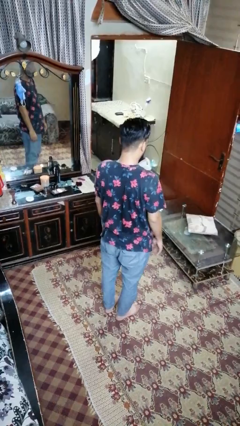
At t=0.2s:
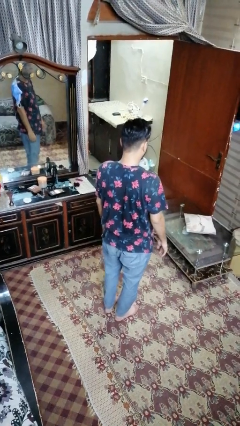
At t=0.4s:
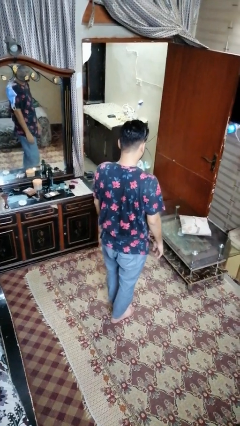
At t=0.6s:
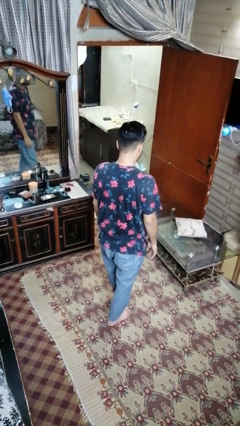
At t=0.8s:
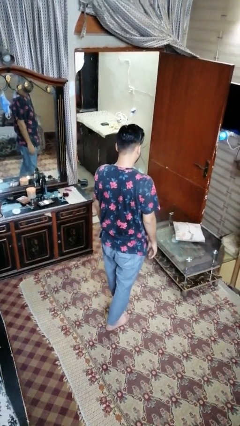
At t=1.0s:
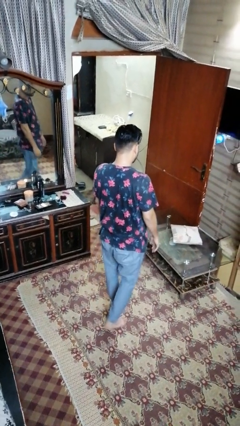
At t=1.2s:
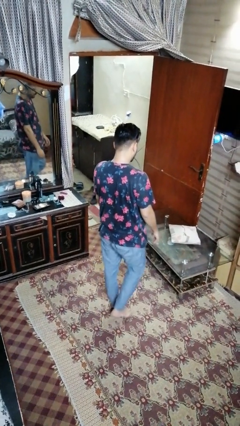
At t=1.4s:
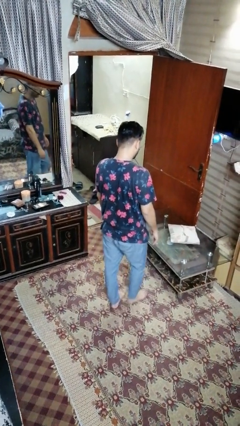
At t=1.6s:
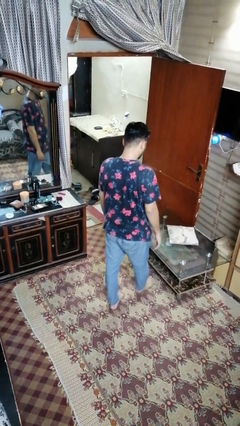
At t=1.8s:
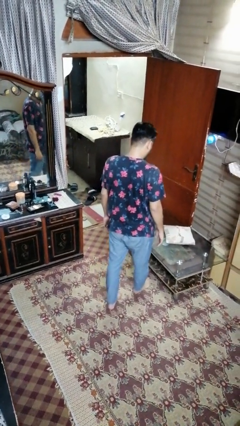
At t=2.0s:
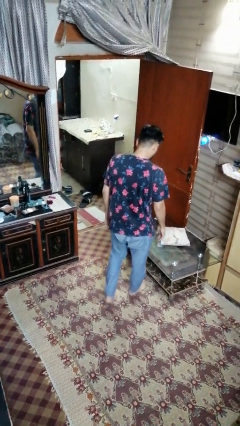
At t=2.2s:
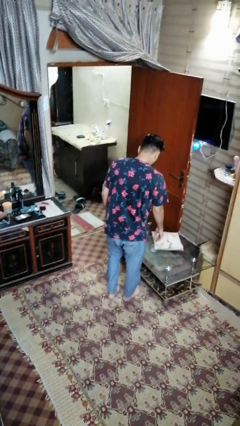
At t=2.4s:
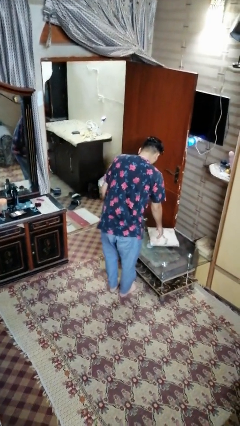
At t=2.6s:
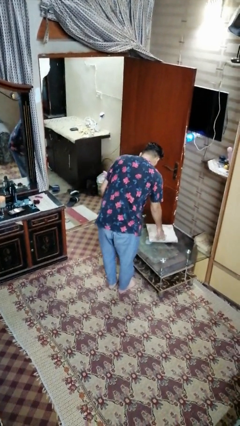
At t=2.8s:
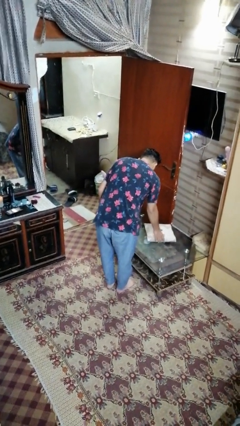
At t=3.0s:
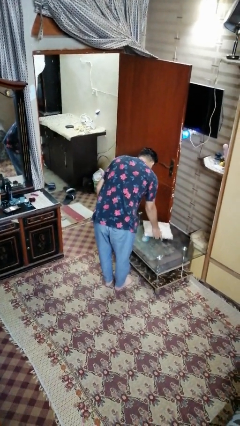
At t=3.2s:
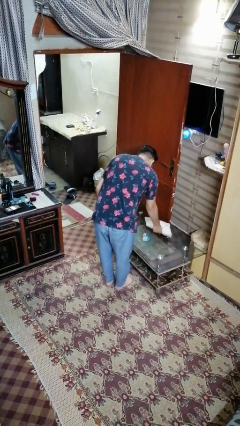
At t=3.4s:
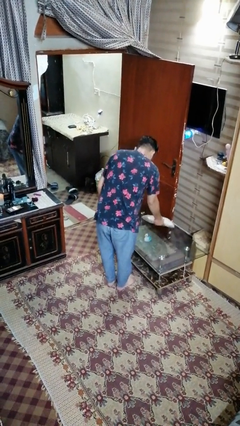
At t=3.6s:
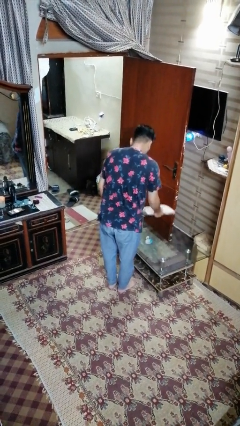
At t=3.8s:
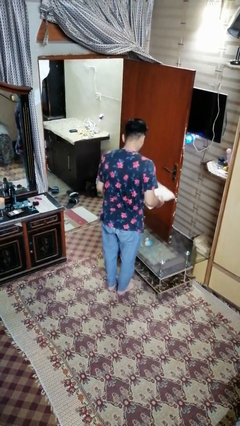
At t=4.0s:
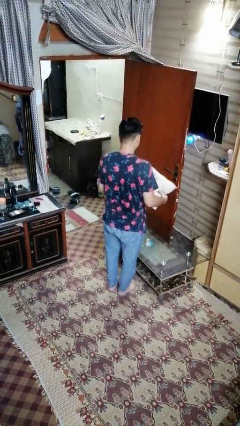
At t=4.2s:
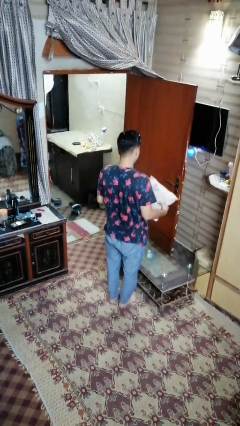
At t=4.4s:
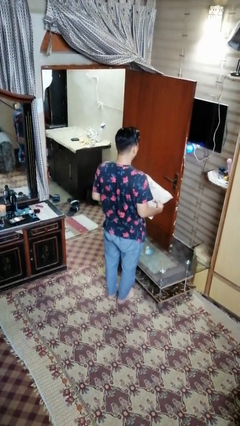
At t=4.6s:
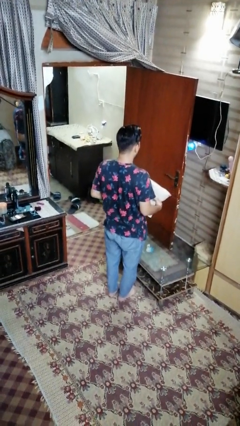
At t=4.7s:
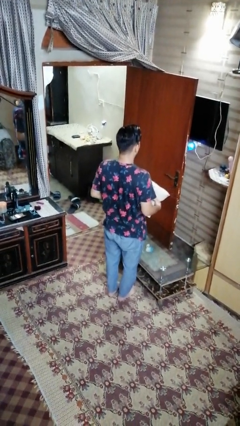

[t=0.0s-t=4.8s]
person picks up object from table

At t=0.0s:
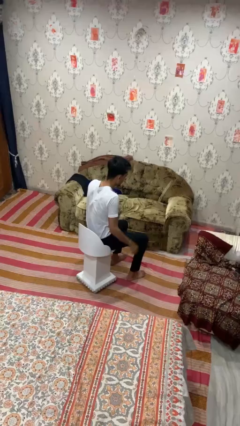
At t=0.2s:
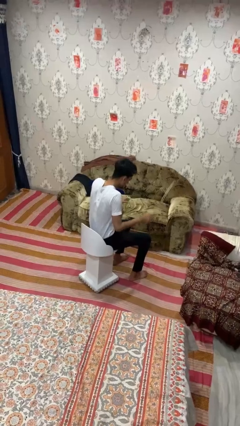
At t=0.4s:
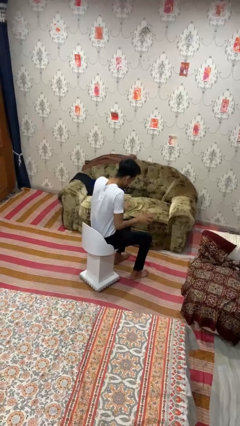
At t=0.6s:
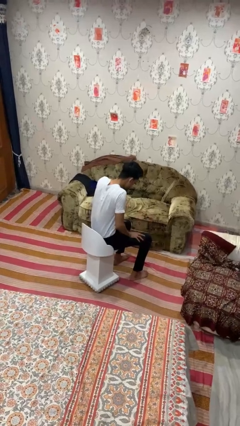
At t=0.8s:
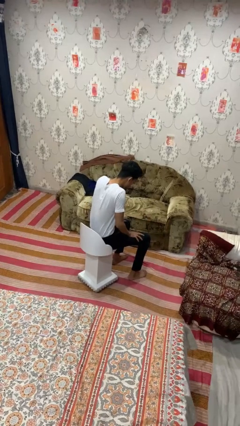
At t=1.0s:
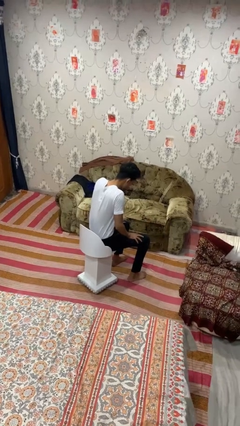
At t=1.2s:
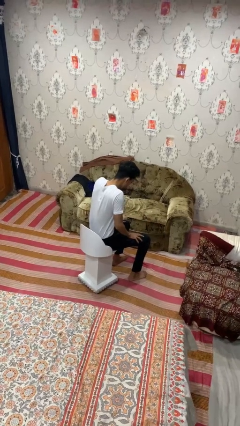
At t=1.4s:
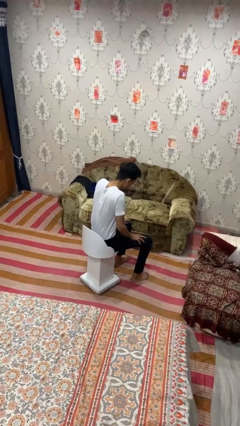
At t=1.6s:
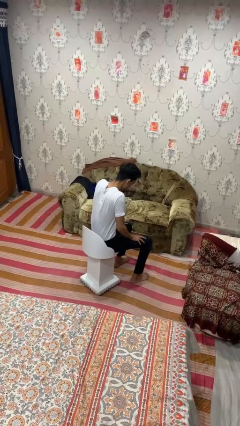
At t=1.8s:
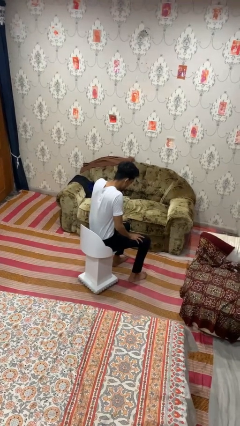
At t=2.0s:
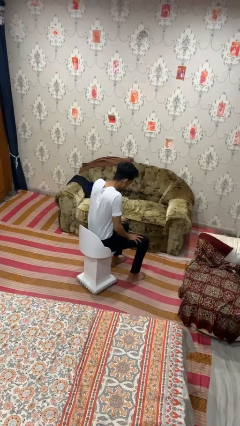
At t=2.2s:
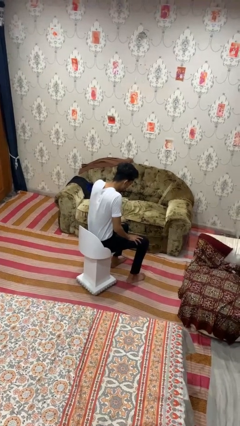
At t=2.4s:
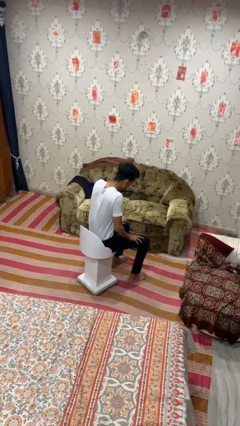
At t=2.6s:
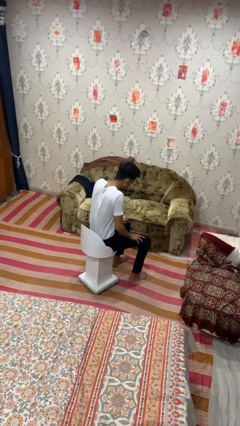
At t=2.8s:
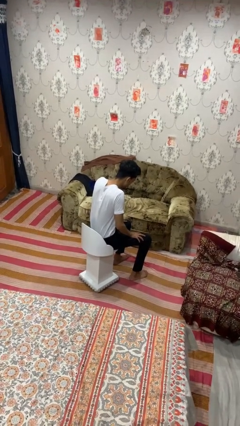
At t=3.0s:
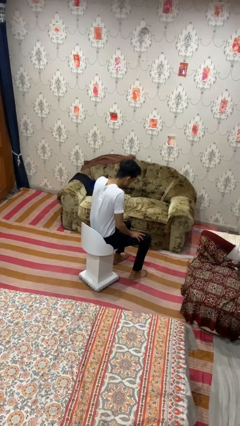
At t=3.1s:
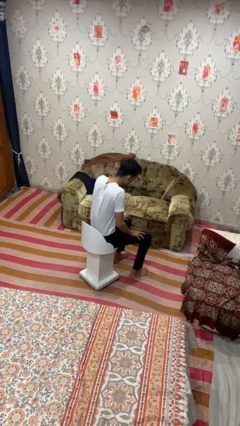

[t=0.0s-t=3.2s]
person slaps hands on thighs

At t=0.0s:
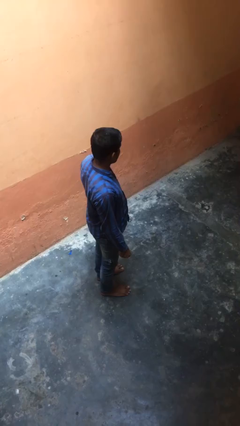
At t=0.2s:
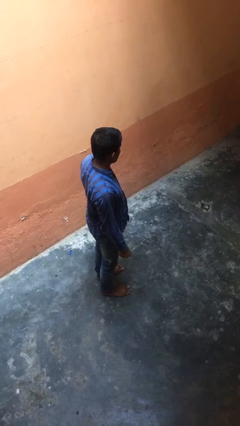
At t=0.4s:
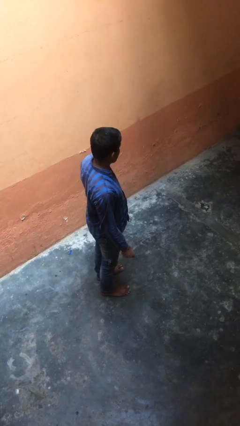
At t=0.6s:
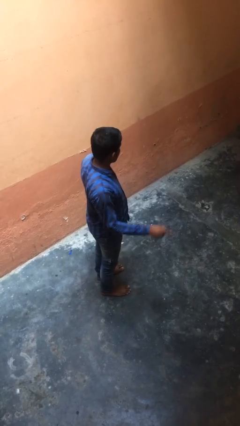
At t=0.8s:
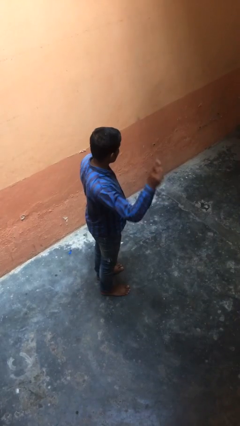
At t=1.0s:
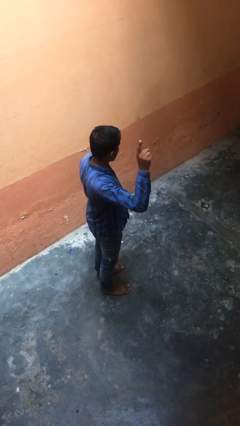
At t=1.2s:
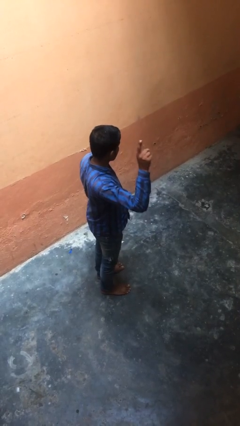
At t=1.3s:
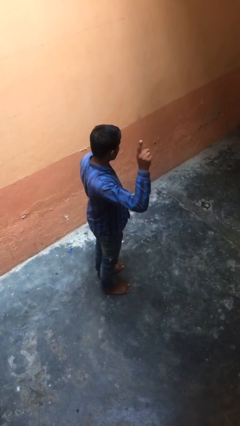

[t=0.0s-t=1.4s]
person gestures number one

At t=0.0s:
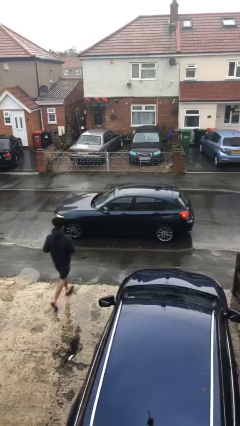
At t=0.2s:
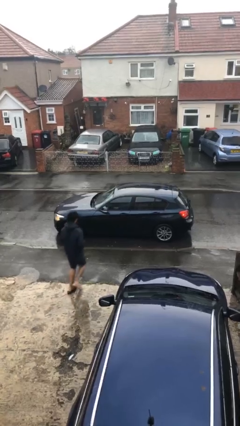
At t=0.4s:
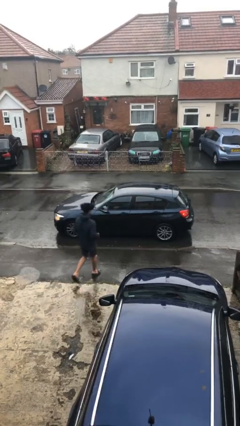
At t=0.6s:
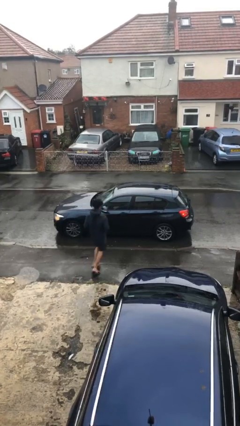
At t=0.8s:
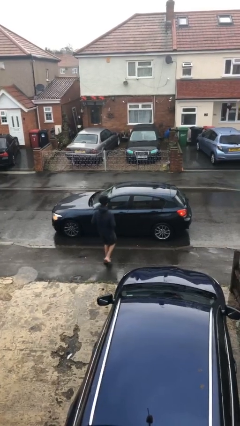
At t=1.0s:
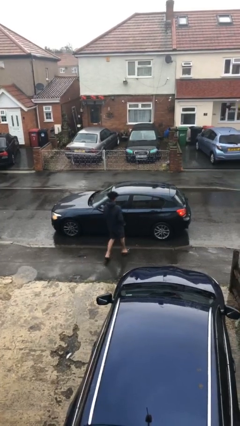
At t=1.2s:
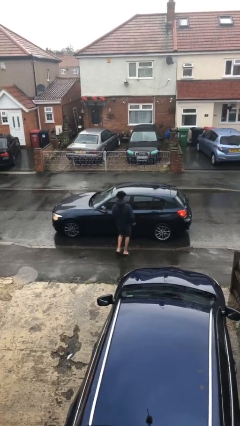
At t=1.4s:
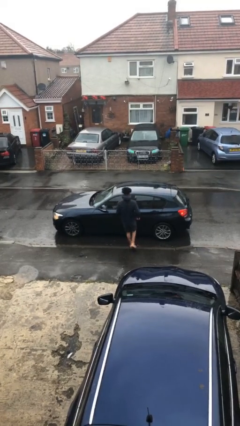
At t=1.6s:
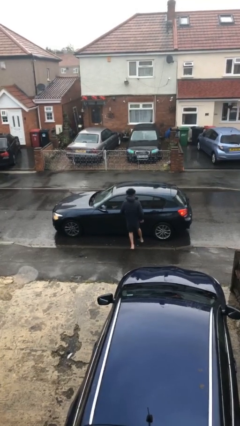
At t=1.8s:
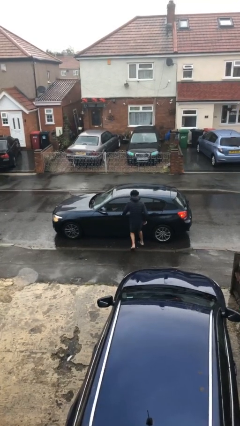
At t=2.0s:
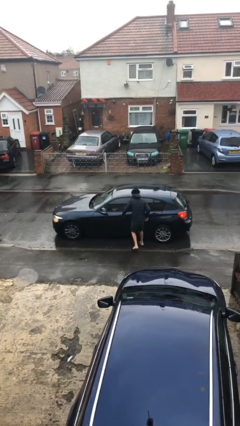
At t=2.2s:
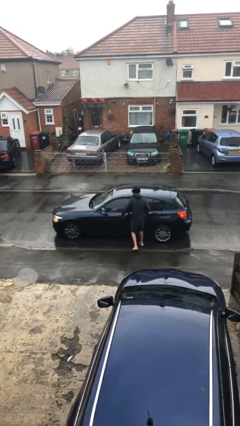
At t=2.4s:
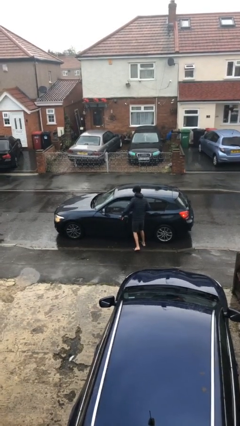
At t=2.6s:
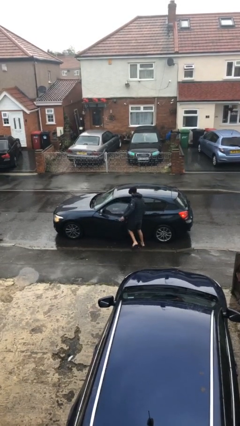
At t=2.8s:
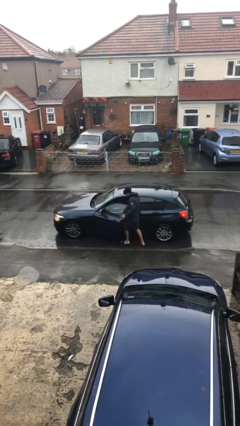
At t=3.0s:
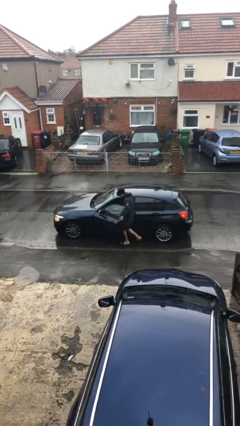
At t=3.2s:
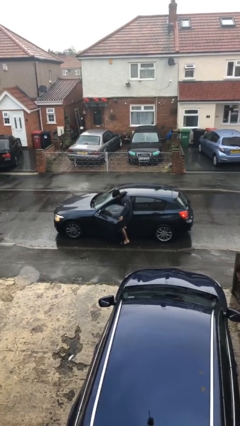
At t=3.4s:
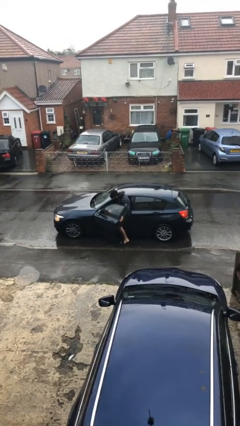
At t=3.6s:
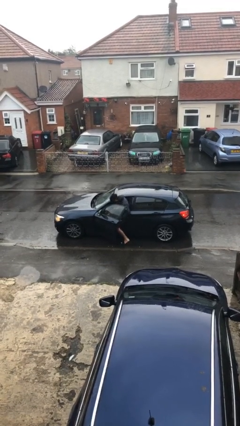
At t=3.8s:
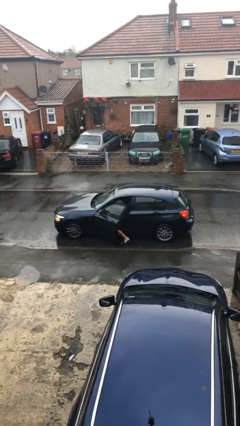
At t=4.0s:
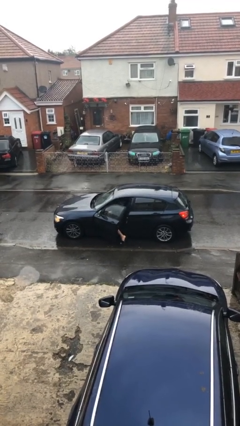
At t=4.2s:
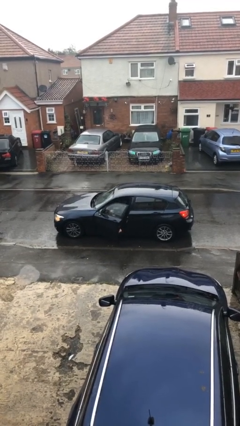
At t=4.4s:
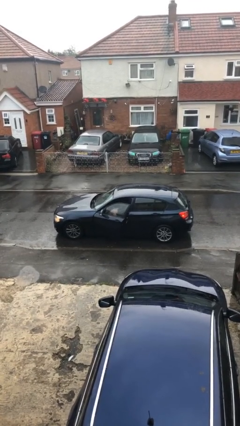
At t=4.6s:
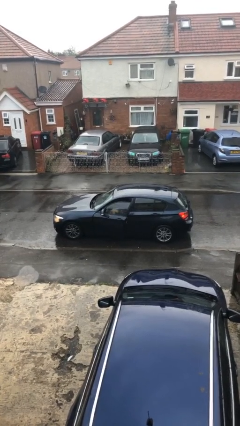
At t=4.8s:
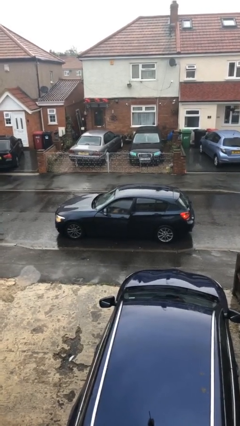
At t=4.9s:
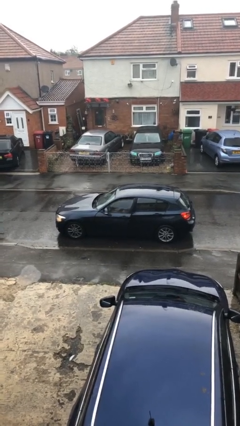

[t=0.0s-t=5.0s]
car picks up person

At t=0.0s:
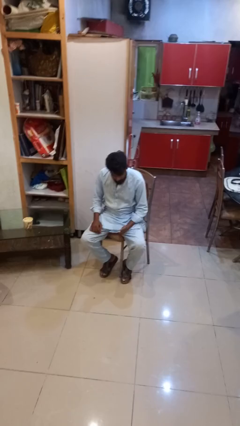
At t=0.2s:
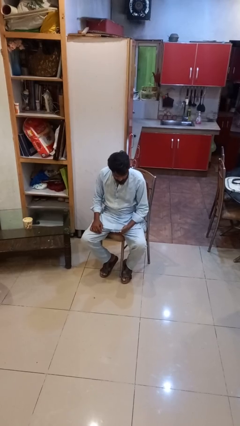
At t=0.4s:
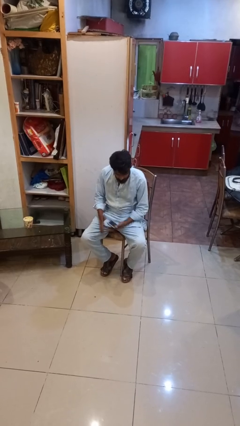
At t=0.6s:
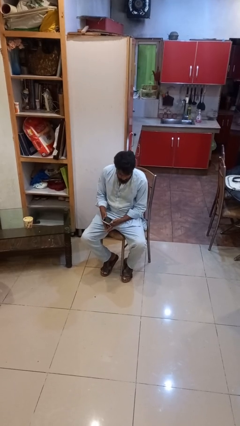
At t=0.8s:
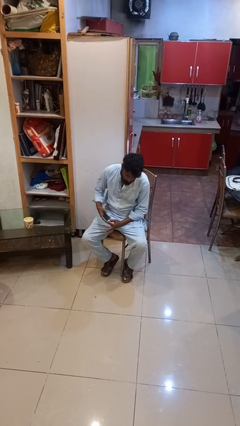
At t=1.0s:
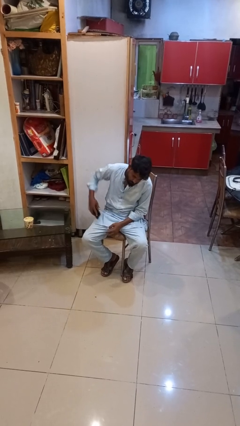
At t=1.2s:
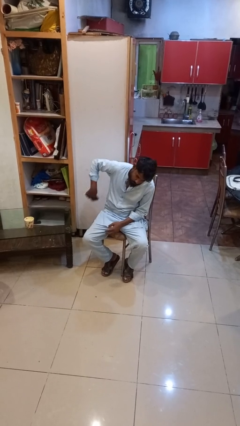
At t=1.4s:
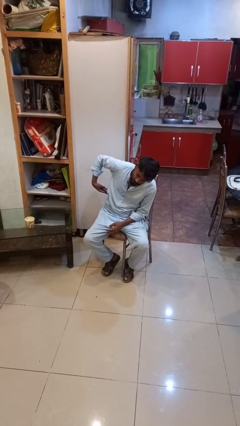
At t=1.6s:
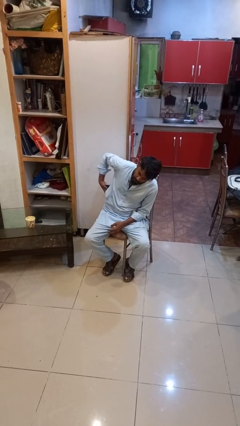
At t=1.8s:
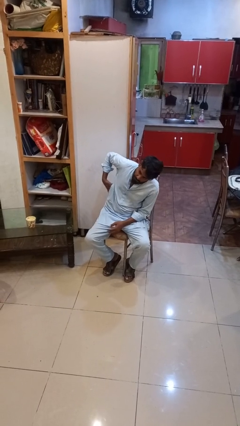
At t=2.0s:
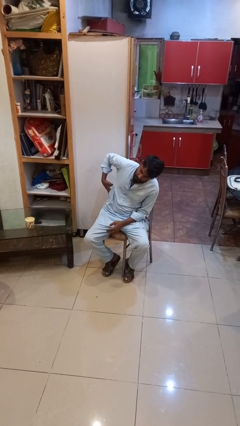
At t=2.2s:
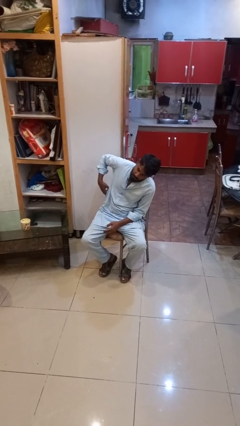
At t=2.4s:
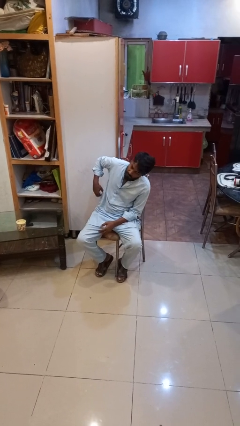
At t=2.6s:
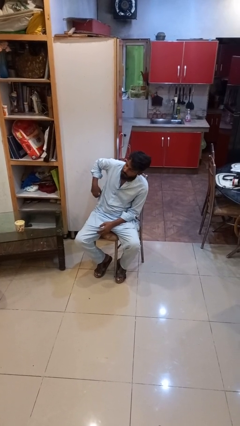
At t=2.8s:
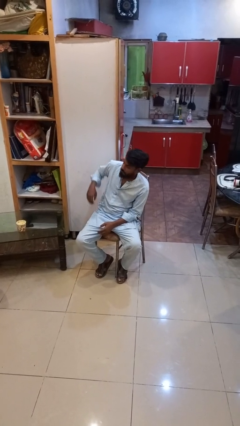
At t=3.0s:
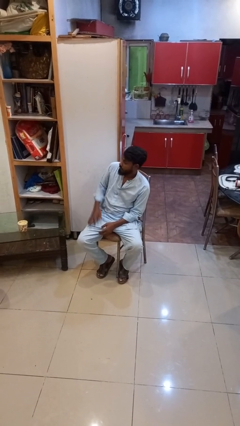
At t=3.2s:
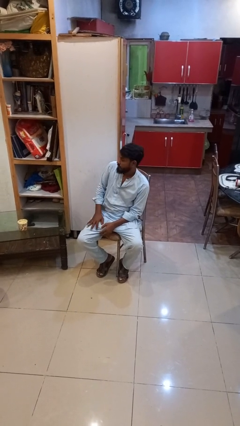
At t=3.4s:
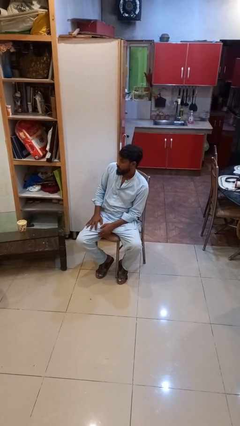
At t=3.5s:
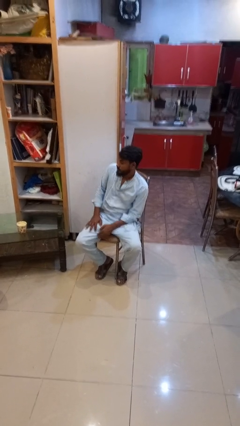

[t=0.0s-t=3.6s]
person puts phone into pocket
